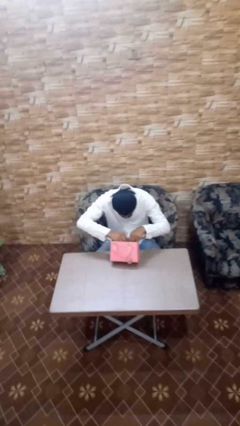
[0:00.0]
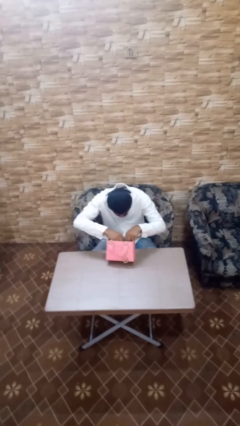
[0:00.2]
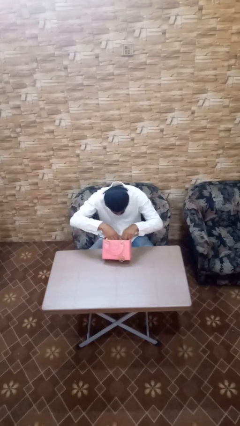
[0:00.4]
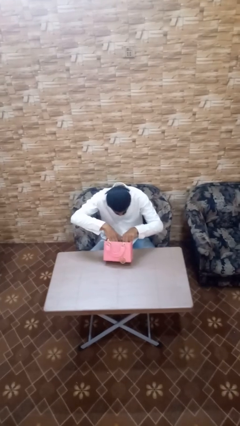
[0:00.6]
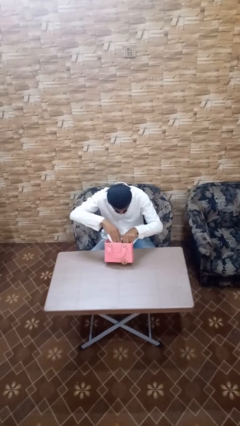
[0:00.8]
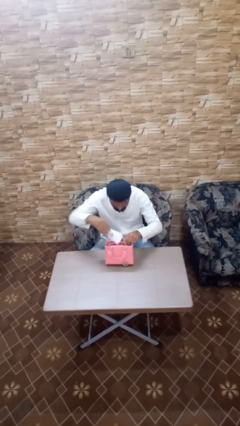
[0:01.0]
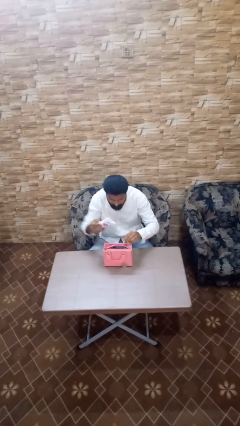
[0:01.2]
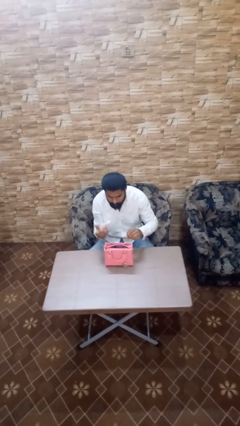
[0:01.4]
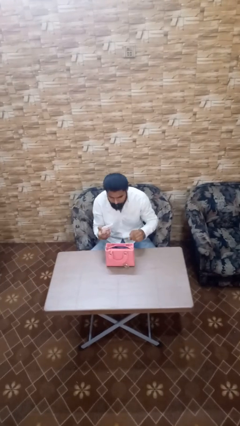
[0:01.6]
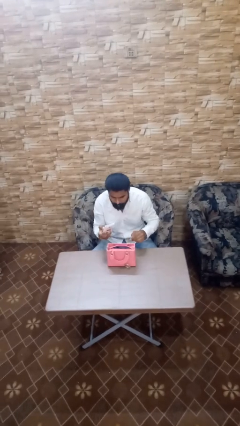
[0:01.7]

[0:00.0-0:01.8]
person takes object from purse

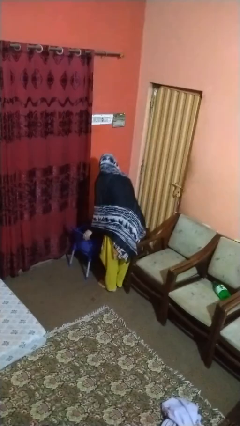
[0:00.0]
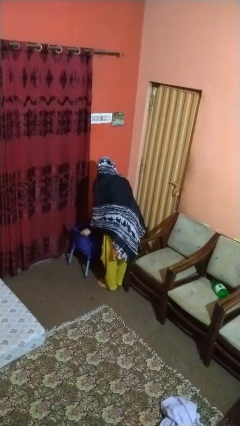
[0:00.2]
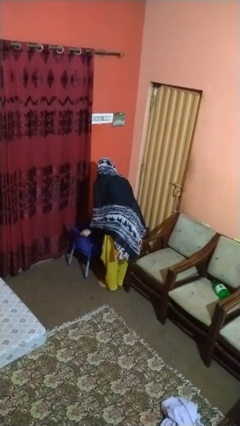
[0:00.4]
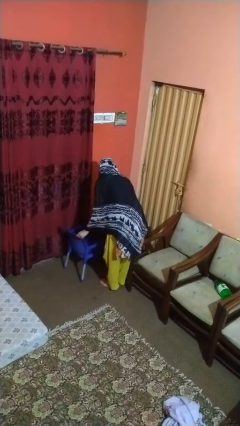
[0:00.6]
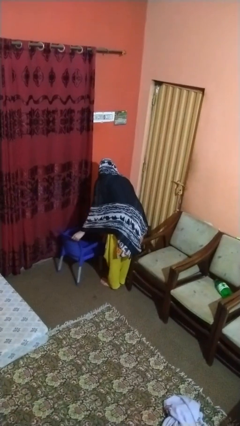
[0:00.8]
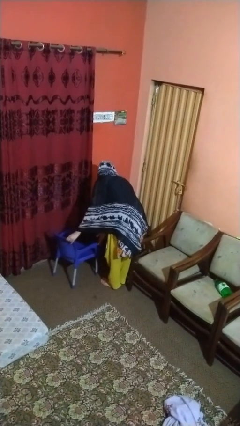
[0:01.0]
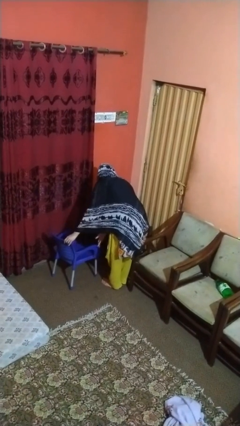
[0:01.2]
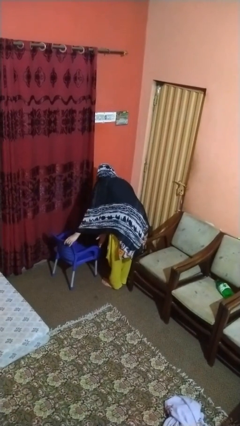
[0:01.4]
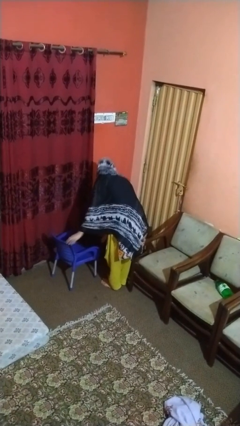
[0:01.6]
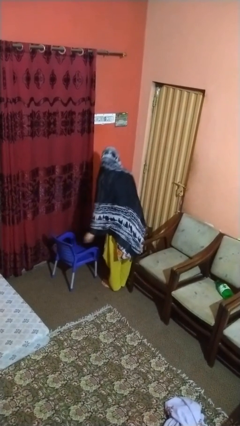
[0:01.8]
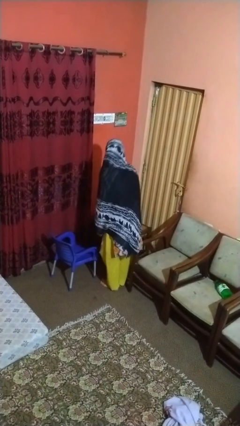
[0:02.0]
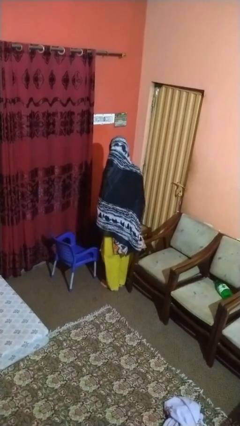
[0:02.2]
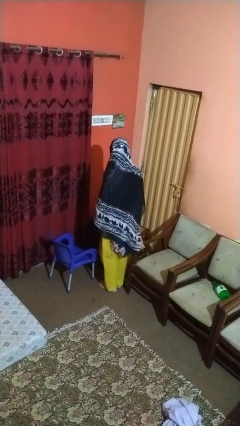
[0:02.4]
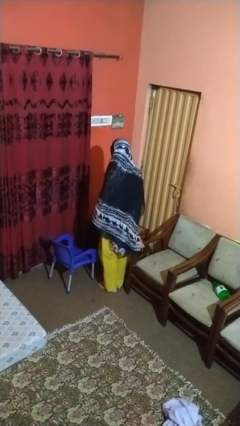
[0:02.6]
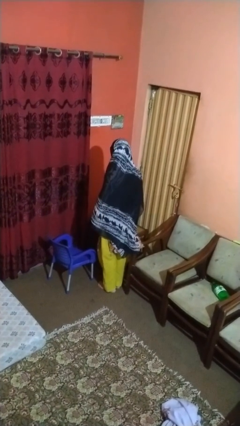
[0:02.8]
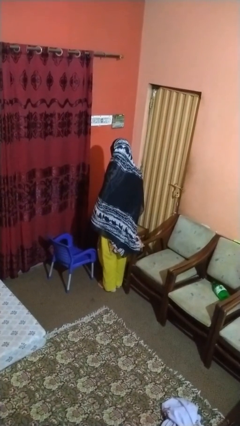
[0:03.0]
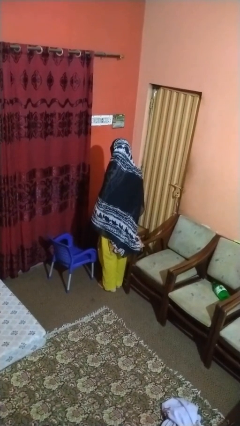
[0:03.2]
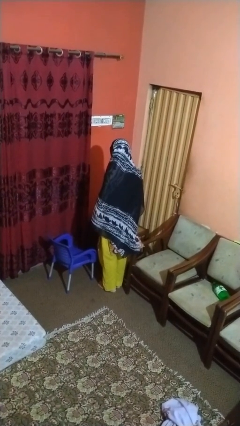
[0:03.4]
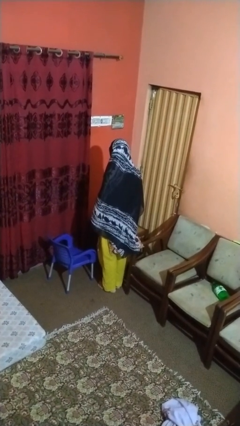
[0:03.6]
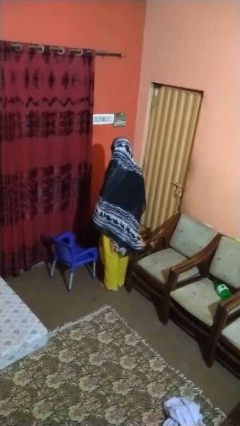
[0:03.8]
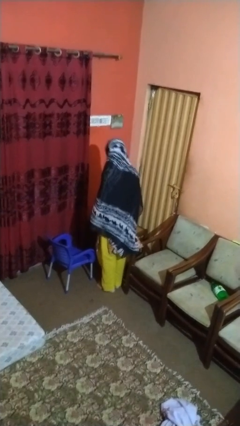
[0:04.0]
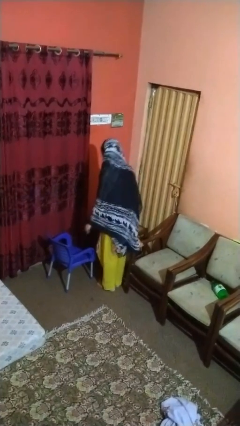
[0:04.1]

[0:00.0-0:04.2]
person pulls out chair

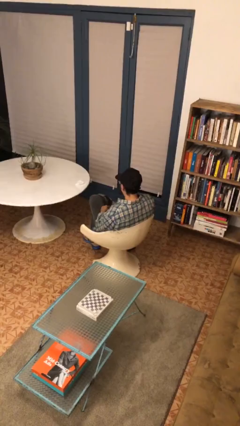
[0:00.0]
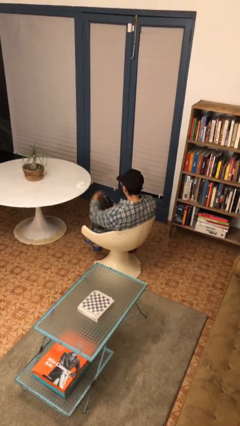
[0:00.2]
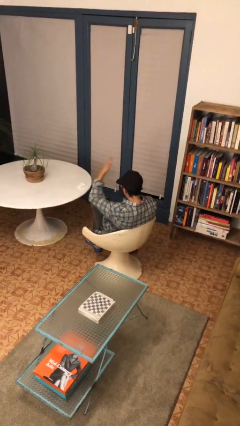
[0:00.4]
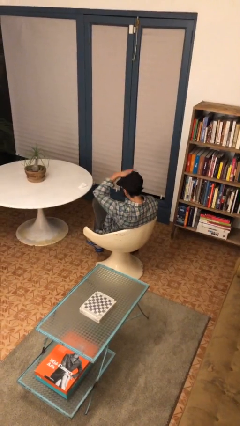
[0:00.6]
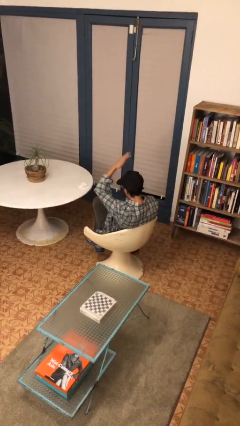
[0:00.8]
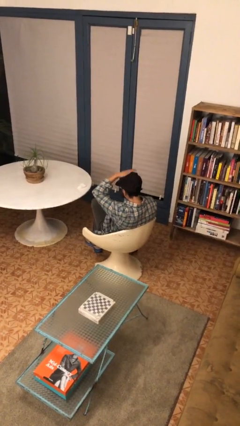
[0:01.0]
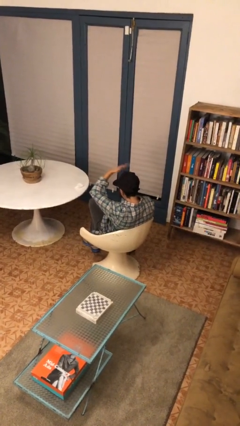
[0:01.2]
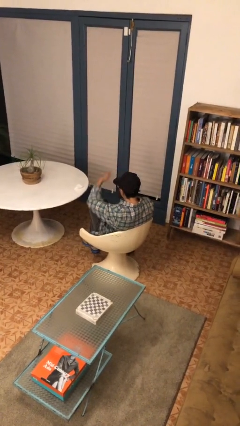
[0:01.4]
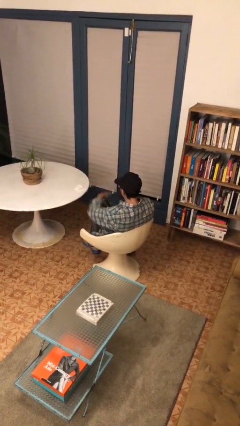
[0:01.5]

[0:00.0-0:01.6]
person pats head

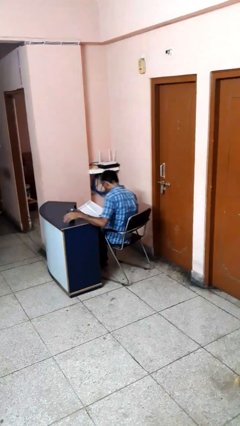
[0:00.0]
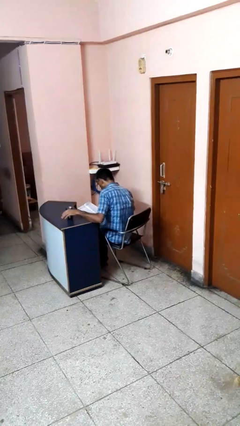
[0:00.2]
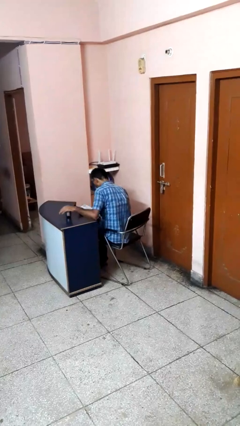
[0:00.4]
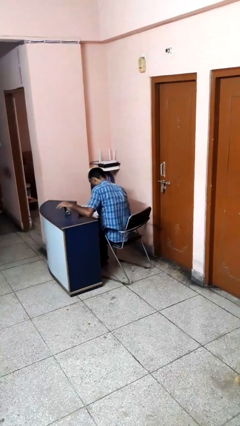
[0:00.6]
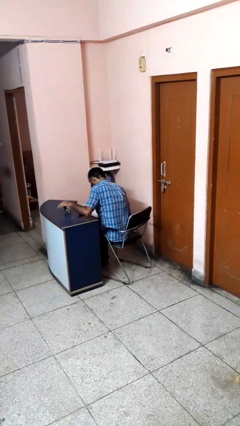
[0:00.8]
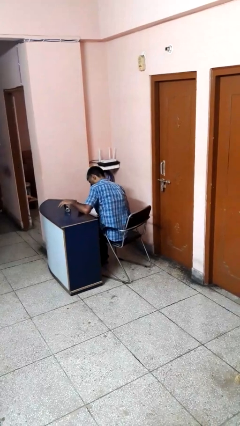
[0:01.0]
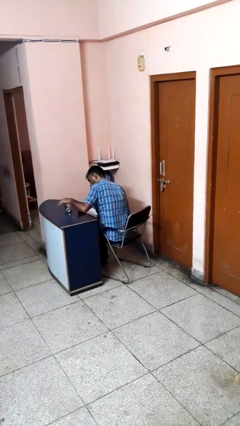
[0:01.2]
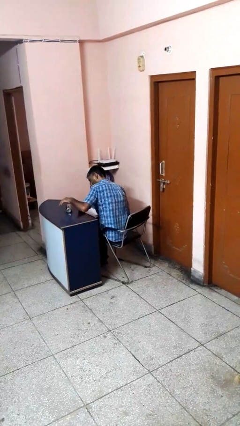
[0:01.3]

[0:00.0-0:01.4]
person knocks over glass

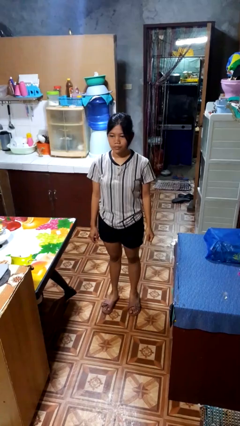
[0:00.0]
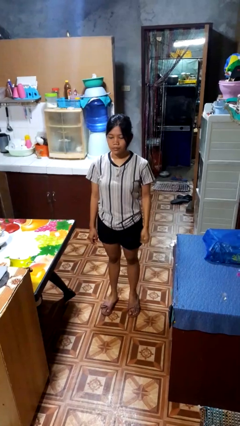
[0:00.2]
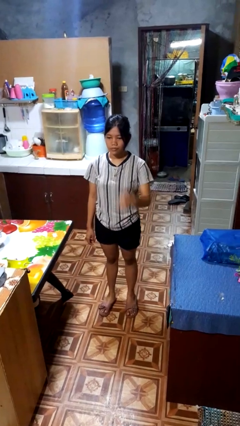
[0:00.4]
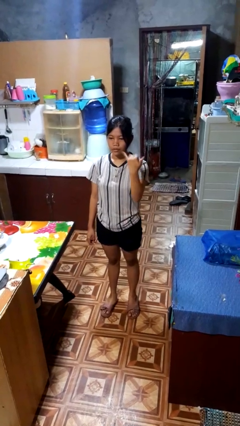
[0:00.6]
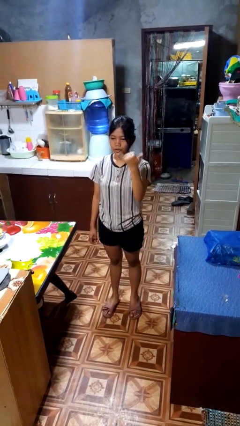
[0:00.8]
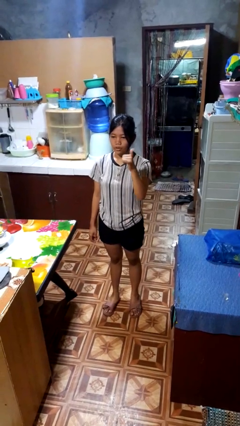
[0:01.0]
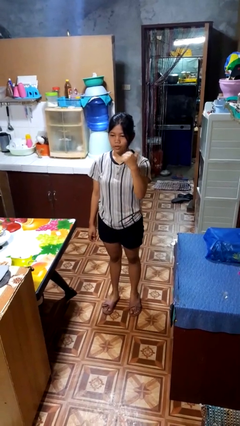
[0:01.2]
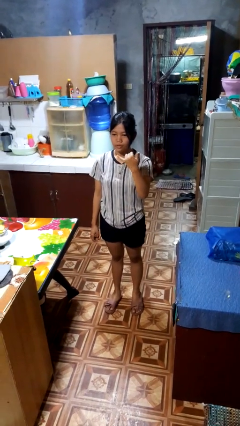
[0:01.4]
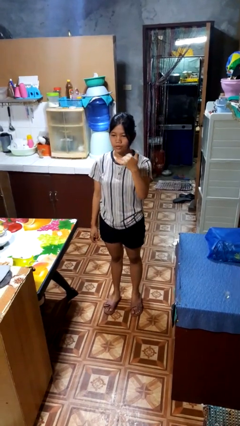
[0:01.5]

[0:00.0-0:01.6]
person gestures hang loose

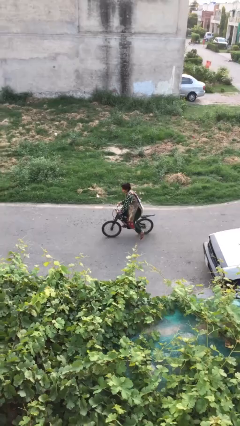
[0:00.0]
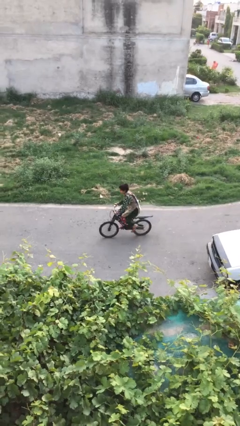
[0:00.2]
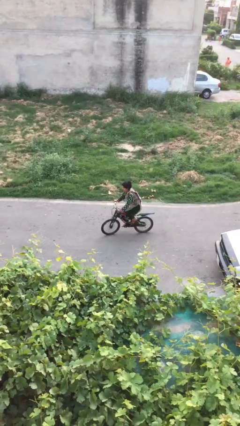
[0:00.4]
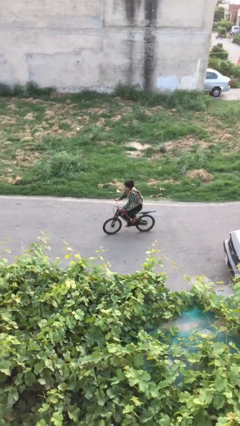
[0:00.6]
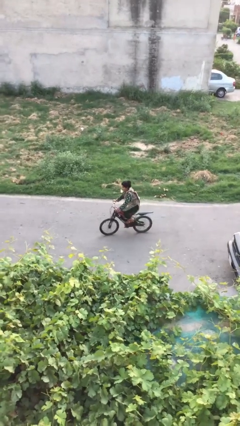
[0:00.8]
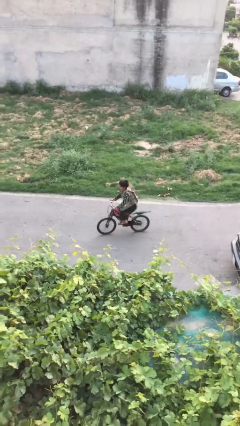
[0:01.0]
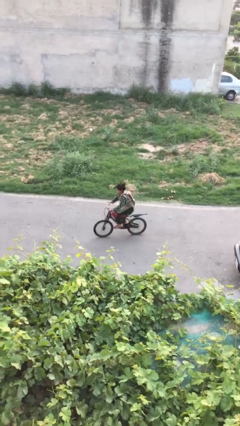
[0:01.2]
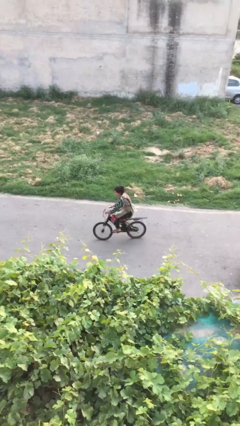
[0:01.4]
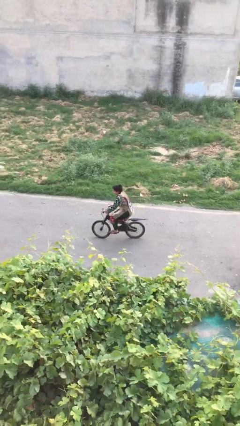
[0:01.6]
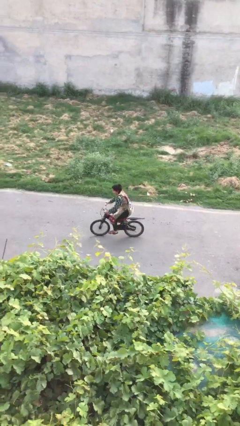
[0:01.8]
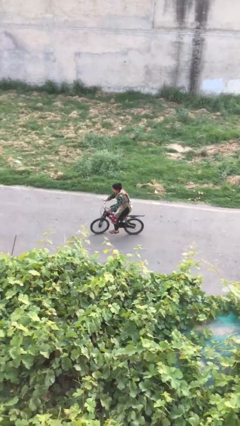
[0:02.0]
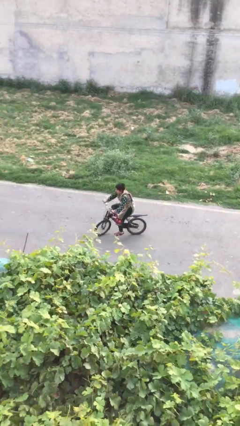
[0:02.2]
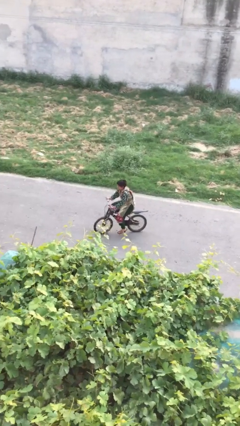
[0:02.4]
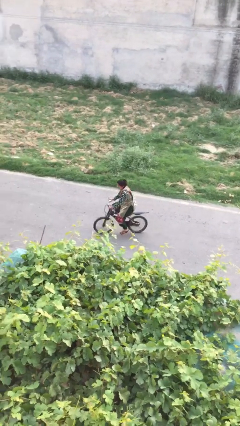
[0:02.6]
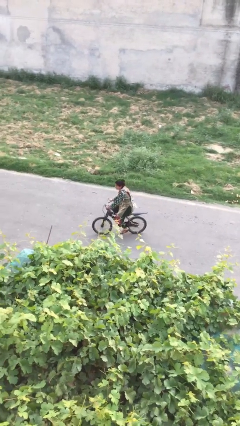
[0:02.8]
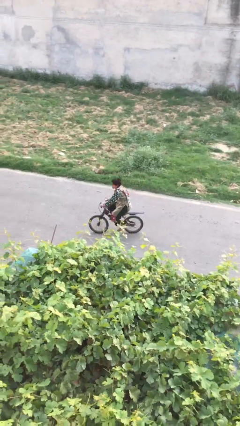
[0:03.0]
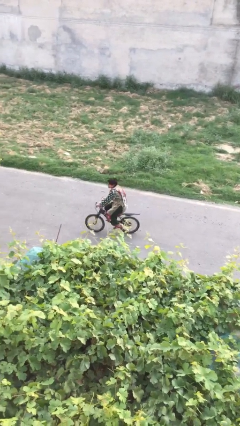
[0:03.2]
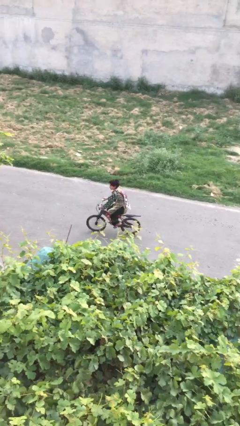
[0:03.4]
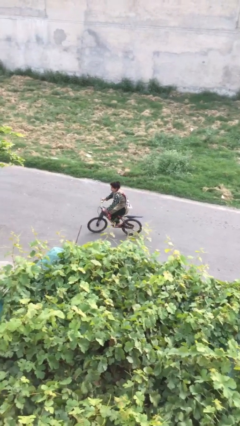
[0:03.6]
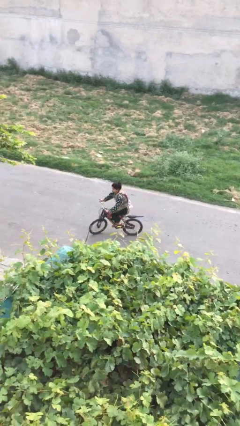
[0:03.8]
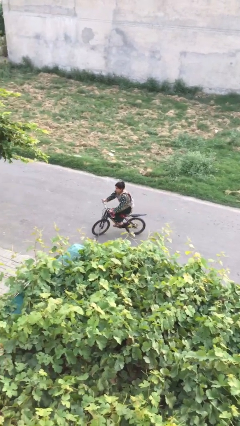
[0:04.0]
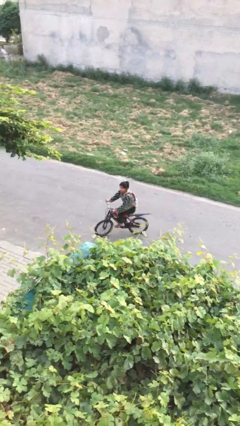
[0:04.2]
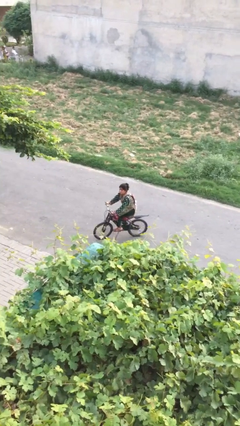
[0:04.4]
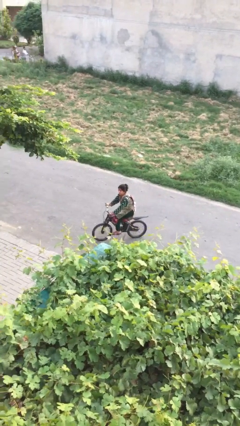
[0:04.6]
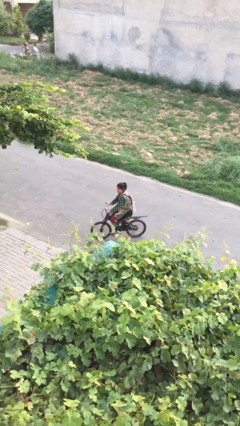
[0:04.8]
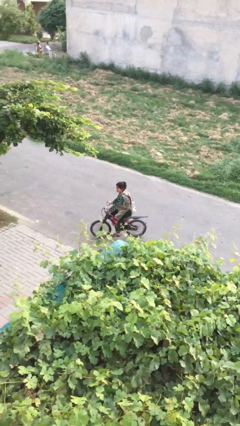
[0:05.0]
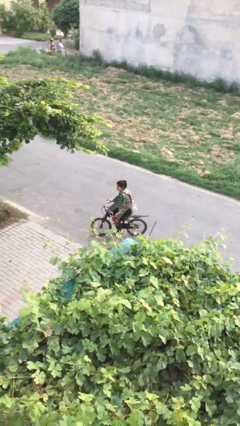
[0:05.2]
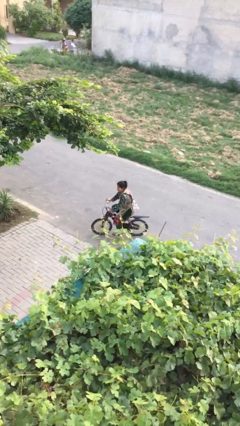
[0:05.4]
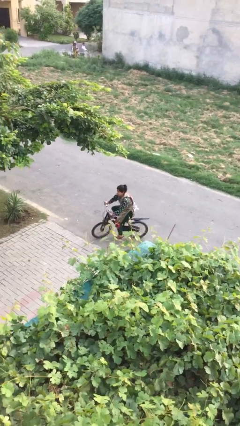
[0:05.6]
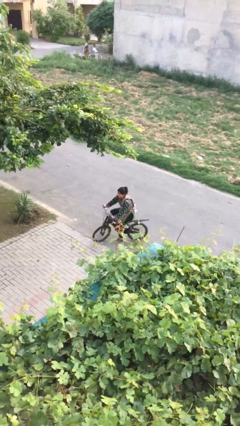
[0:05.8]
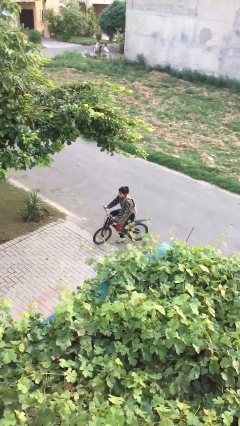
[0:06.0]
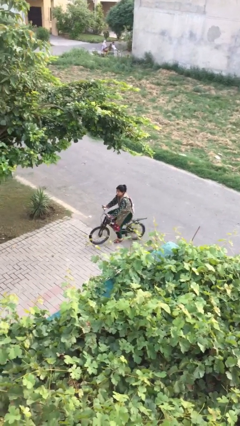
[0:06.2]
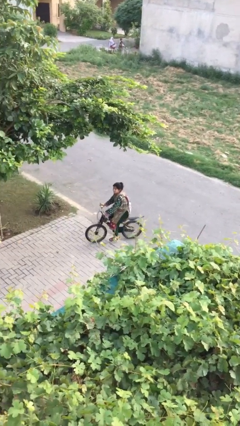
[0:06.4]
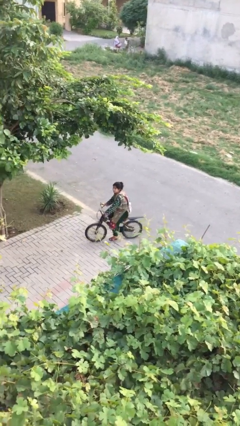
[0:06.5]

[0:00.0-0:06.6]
person rides bicycle
